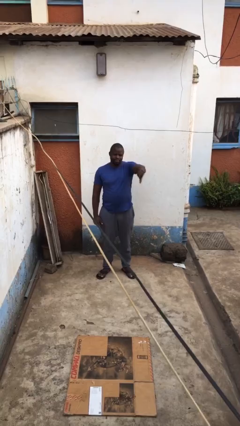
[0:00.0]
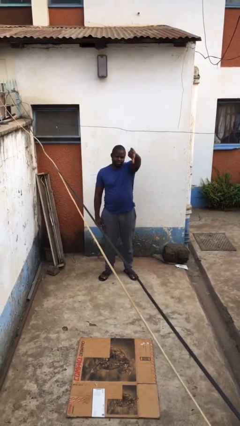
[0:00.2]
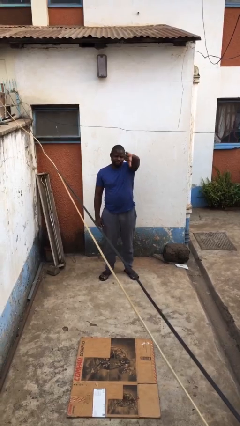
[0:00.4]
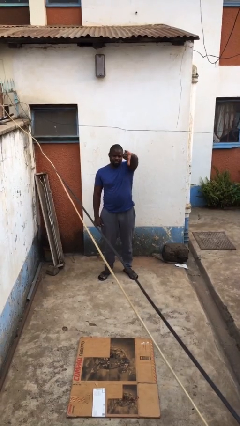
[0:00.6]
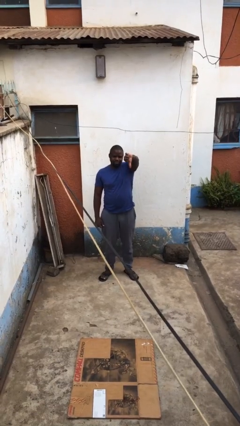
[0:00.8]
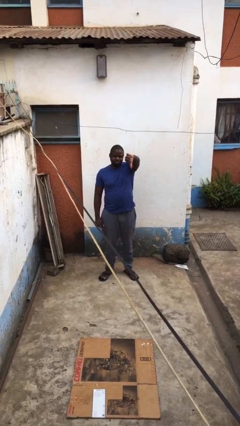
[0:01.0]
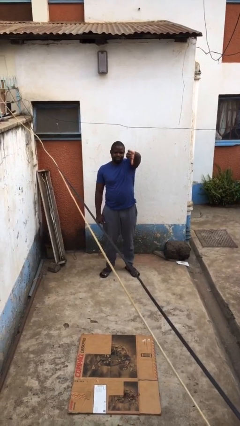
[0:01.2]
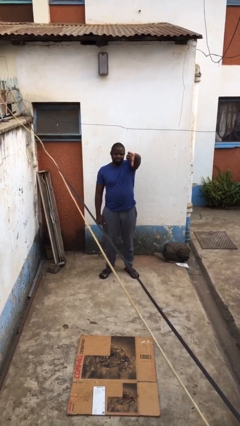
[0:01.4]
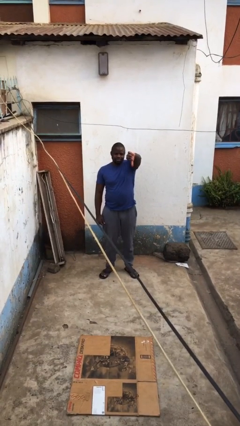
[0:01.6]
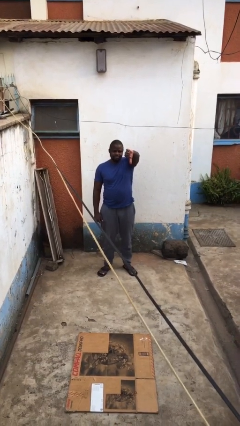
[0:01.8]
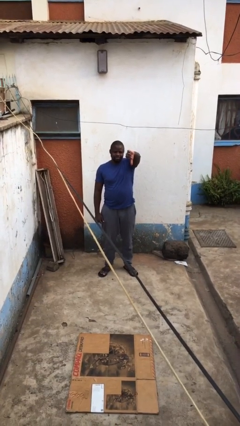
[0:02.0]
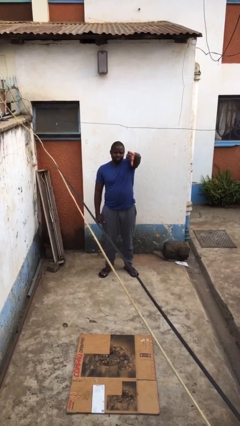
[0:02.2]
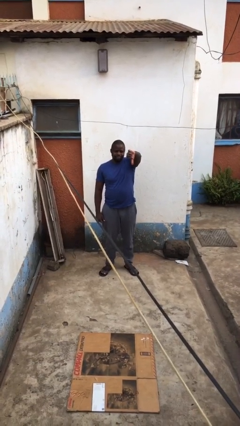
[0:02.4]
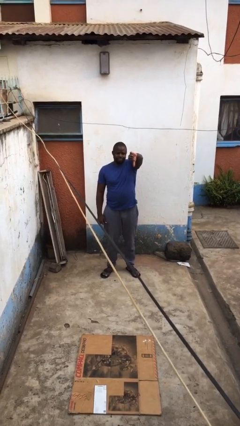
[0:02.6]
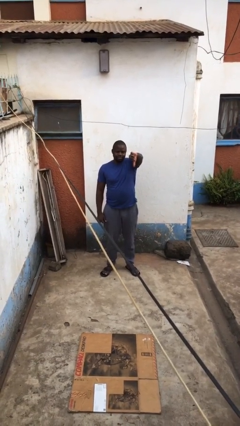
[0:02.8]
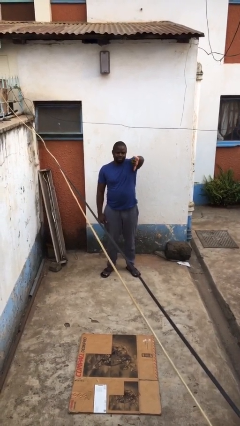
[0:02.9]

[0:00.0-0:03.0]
person gestures thumbs down

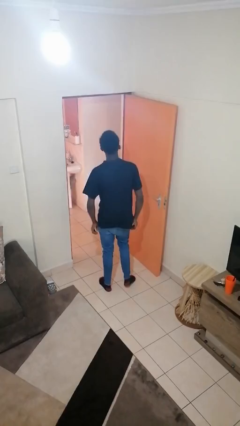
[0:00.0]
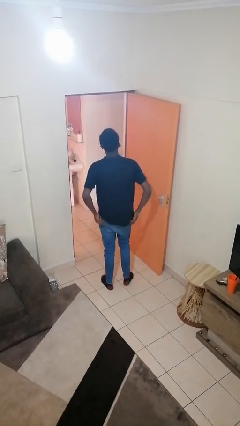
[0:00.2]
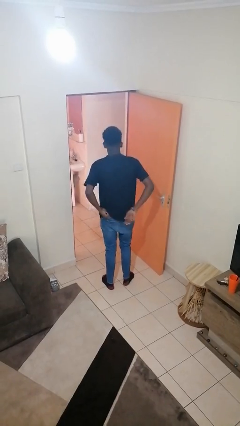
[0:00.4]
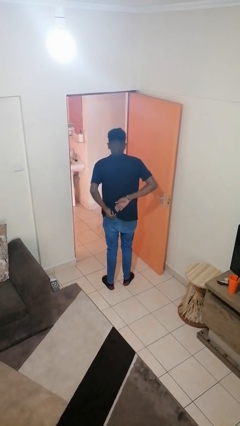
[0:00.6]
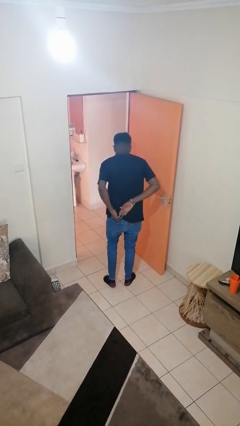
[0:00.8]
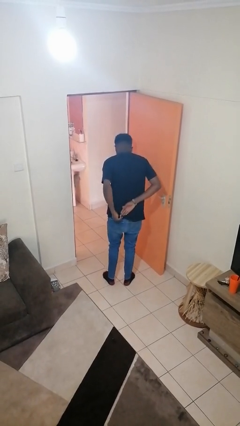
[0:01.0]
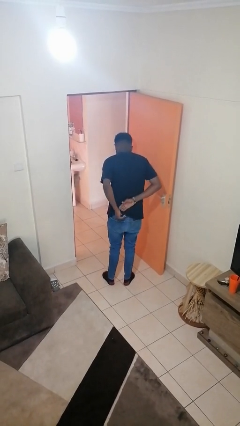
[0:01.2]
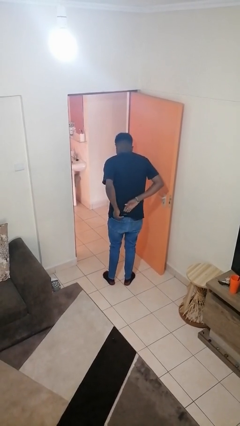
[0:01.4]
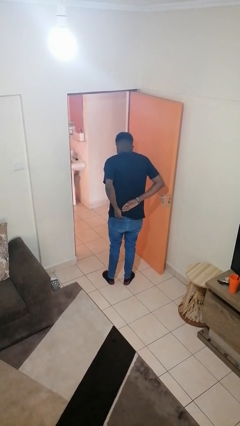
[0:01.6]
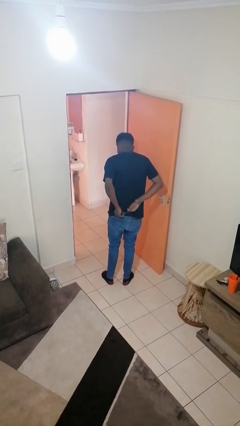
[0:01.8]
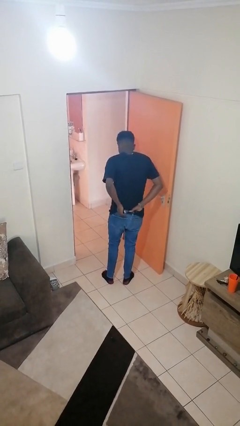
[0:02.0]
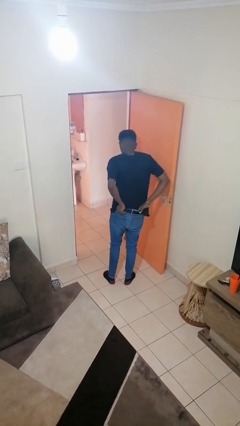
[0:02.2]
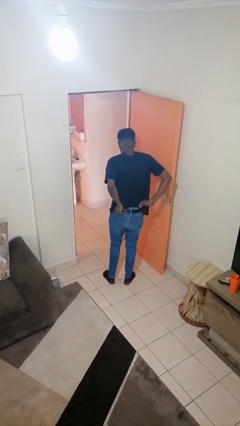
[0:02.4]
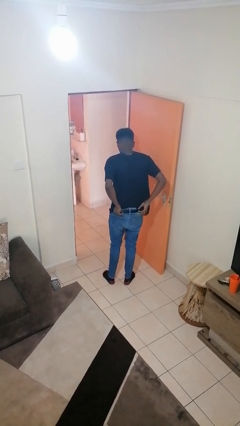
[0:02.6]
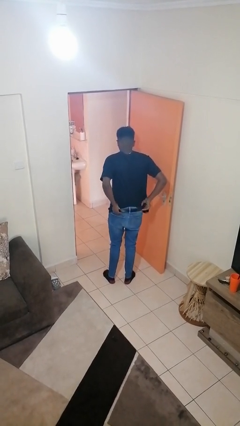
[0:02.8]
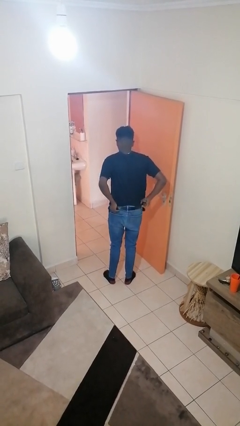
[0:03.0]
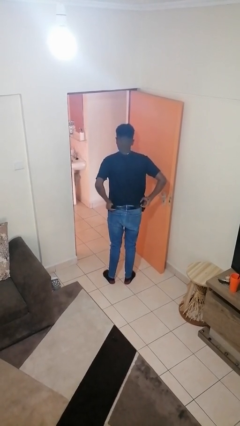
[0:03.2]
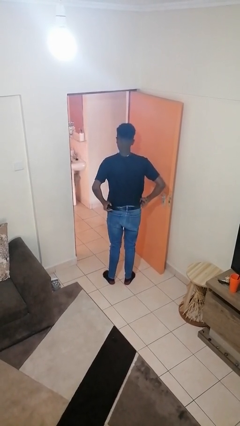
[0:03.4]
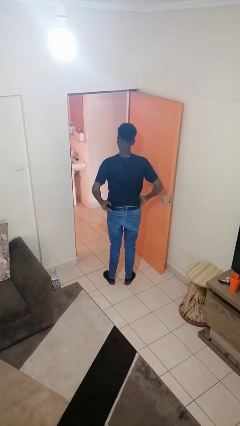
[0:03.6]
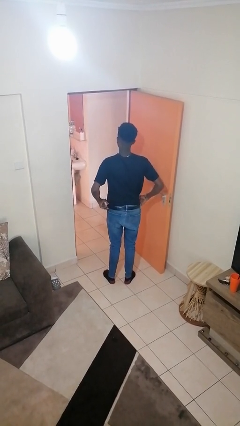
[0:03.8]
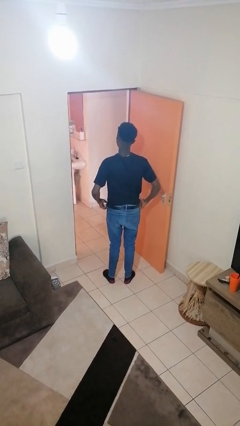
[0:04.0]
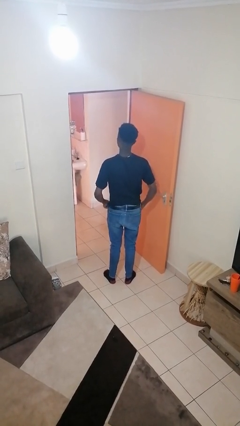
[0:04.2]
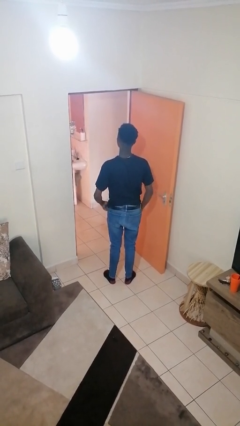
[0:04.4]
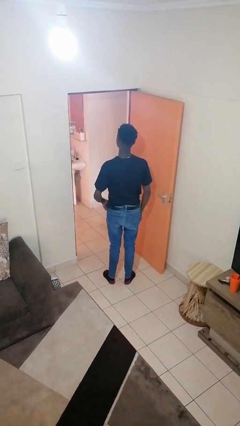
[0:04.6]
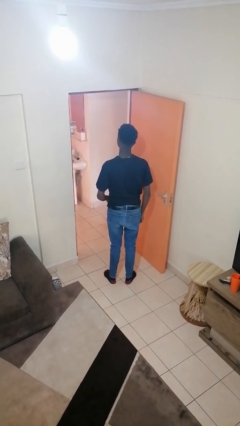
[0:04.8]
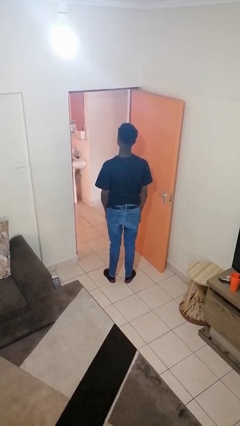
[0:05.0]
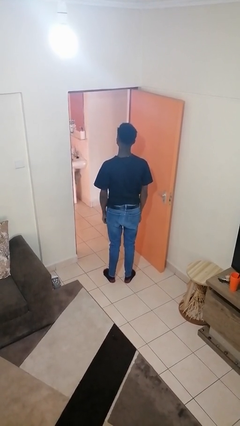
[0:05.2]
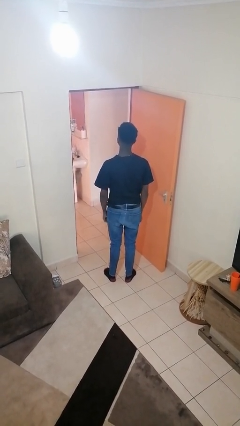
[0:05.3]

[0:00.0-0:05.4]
person tucks in shirt

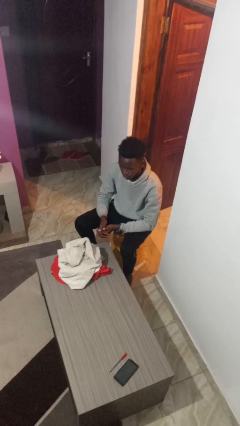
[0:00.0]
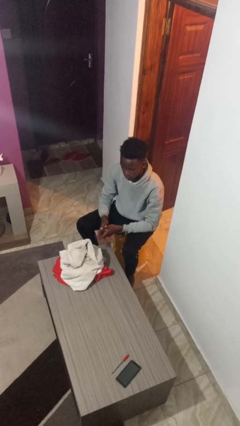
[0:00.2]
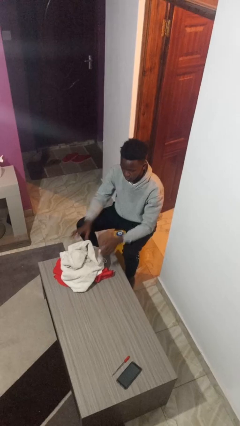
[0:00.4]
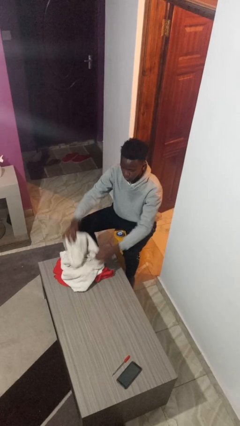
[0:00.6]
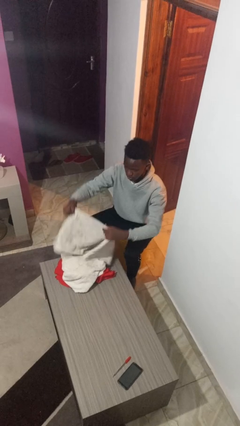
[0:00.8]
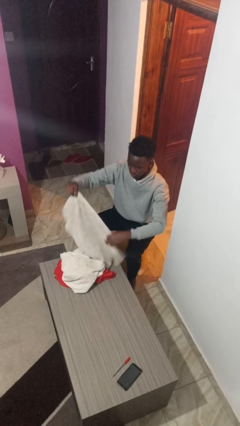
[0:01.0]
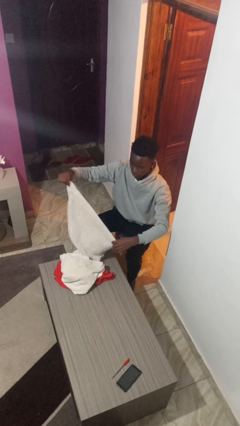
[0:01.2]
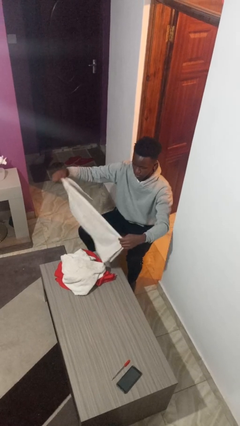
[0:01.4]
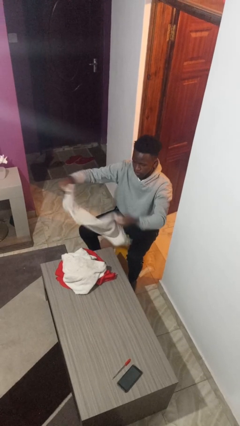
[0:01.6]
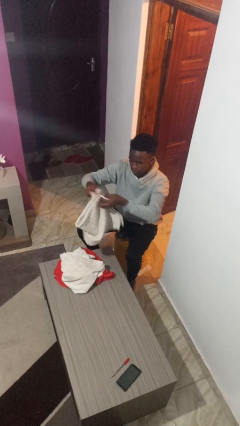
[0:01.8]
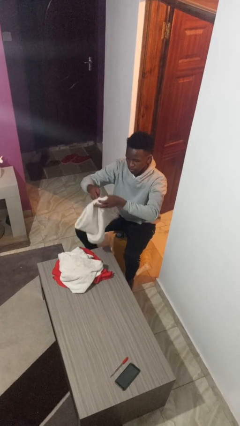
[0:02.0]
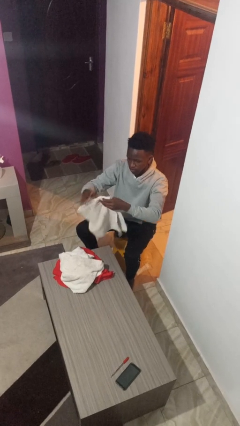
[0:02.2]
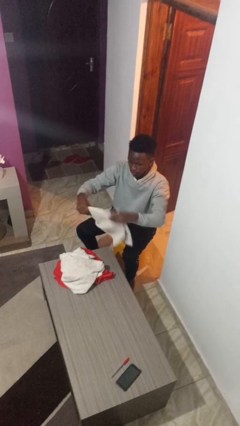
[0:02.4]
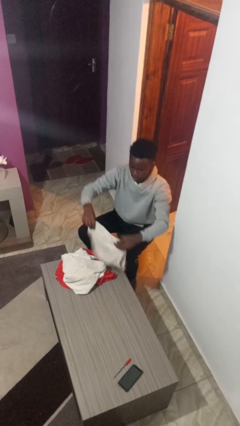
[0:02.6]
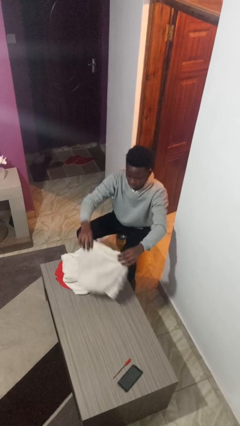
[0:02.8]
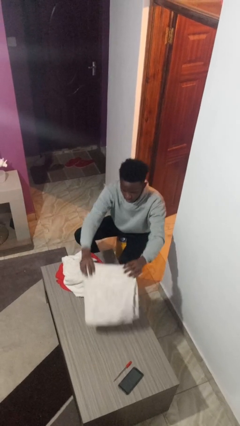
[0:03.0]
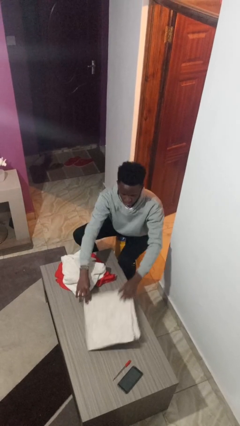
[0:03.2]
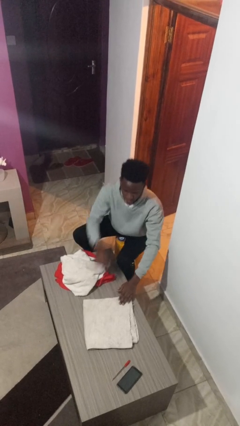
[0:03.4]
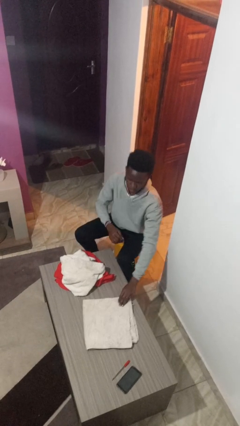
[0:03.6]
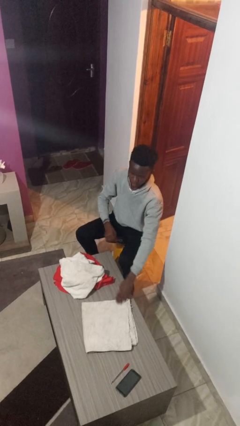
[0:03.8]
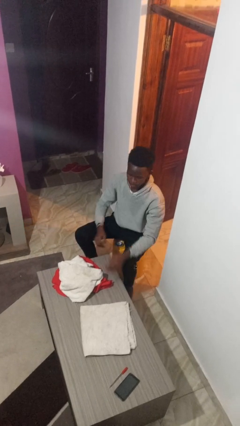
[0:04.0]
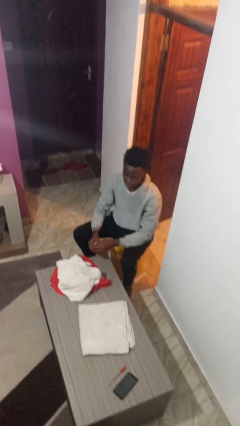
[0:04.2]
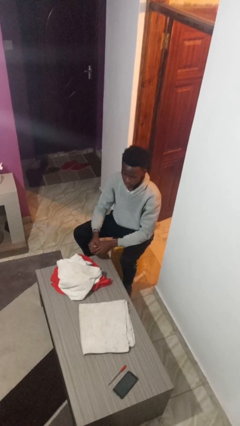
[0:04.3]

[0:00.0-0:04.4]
person folds towel

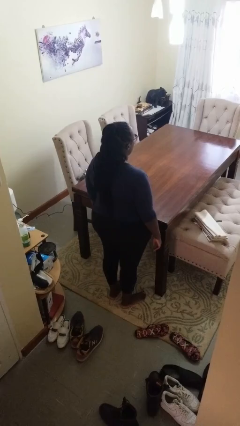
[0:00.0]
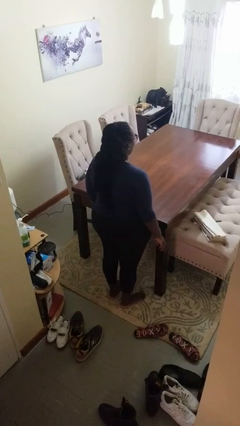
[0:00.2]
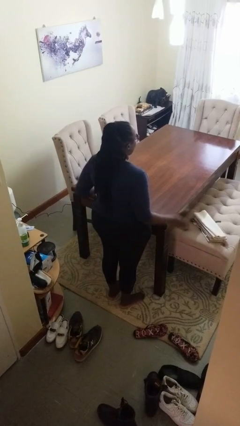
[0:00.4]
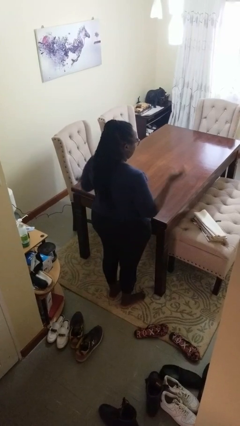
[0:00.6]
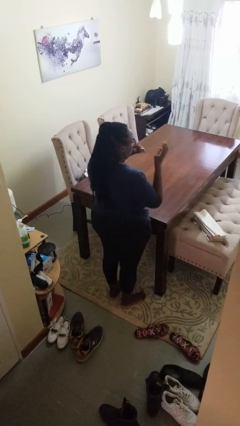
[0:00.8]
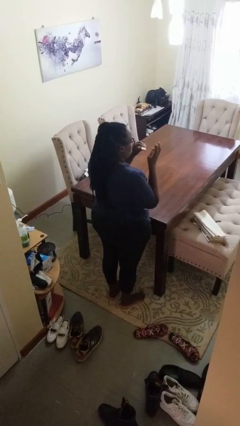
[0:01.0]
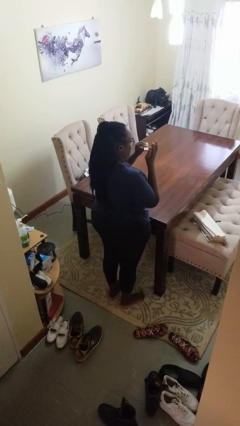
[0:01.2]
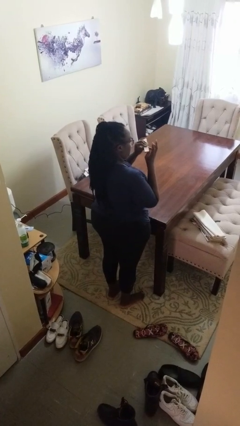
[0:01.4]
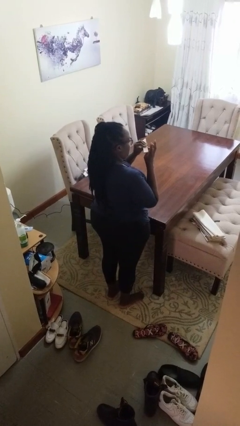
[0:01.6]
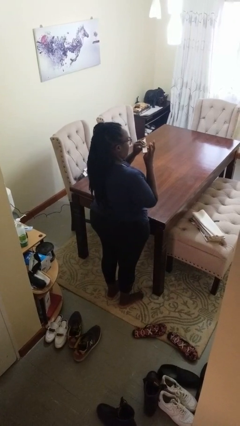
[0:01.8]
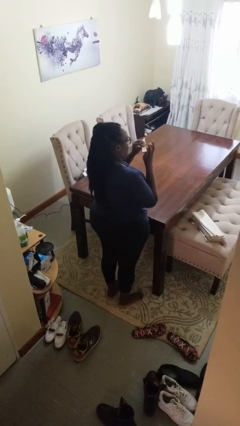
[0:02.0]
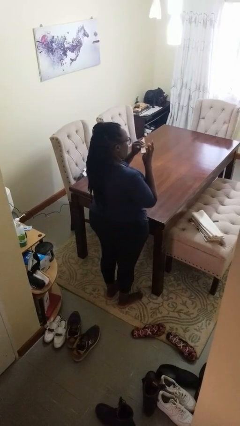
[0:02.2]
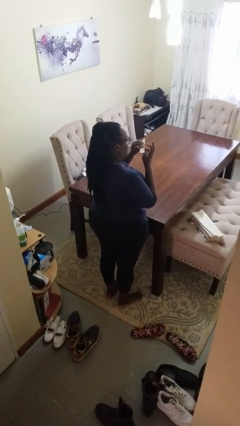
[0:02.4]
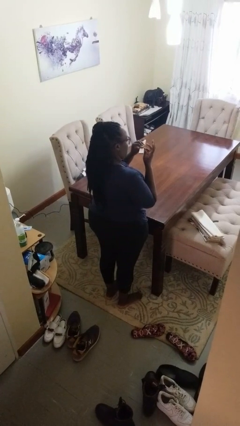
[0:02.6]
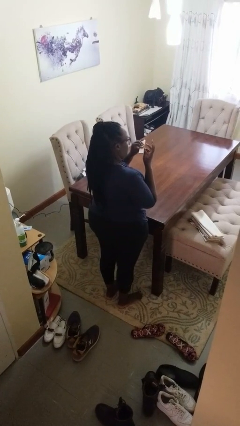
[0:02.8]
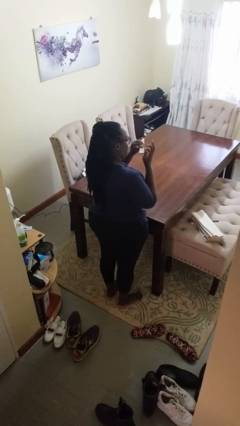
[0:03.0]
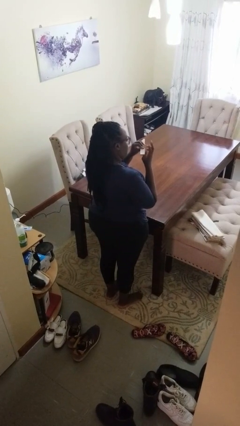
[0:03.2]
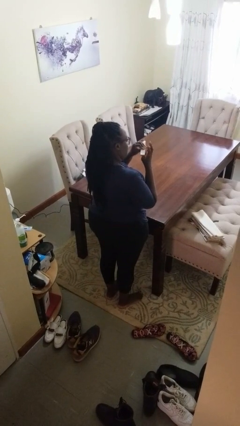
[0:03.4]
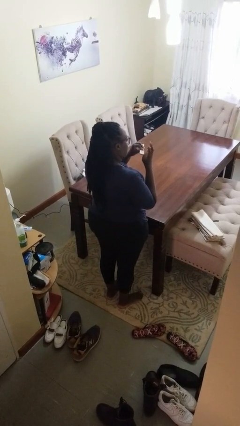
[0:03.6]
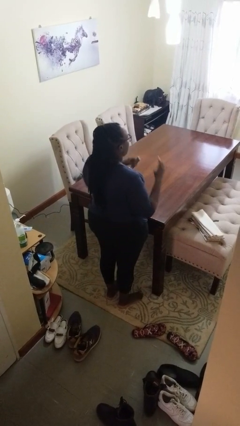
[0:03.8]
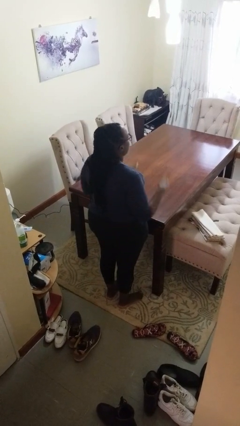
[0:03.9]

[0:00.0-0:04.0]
person files fingernails

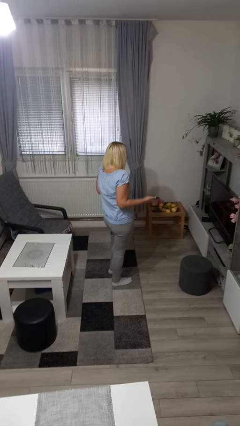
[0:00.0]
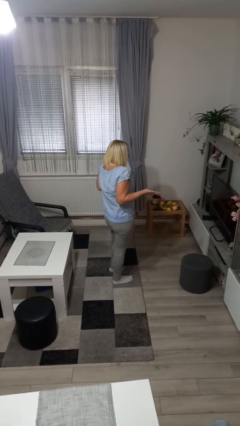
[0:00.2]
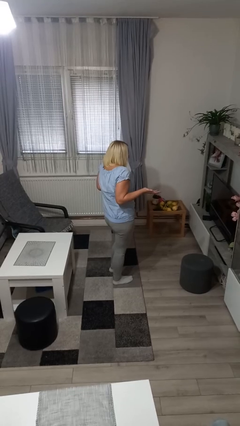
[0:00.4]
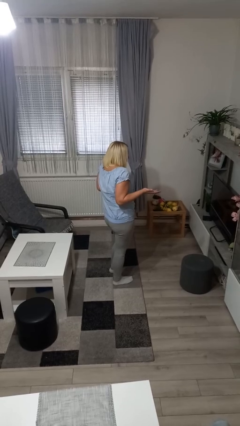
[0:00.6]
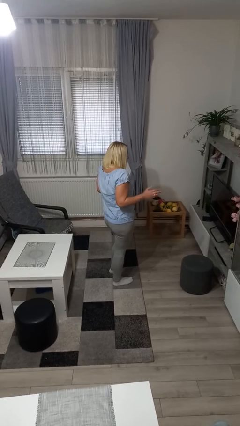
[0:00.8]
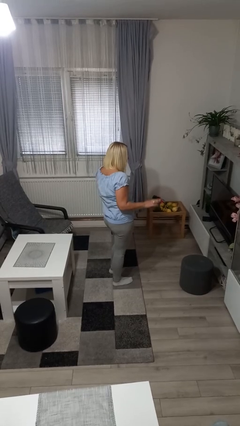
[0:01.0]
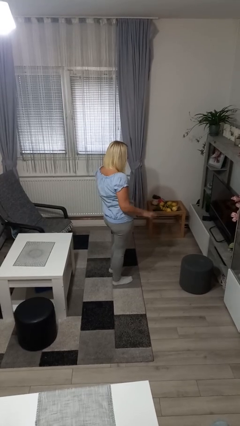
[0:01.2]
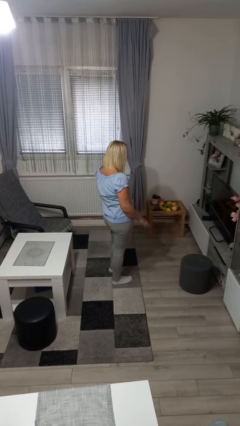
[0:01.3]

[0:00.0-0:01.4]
person shrugs
